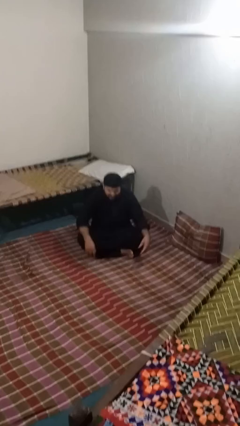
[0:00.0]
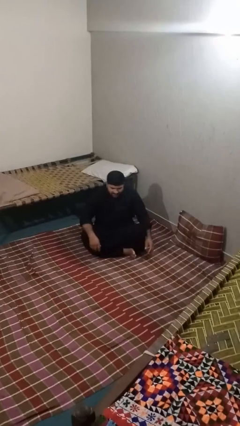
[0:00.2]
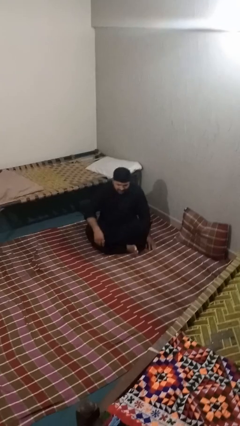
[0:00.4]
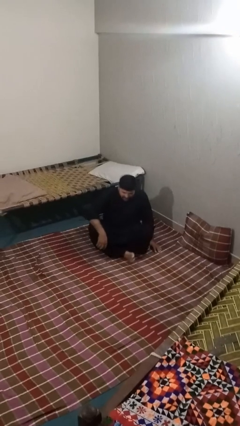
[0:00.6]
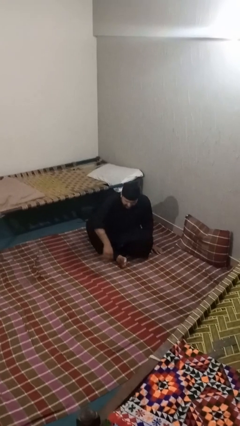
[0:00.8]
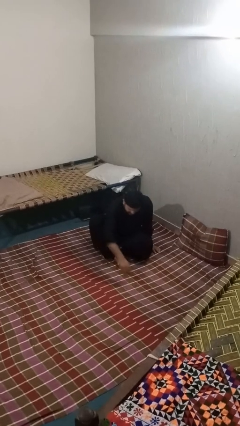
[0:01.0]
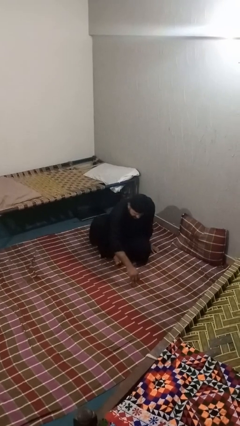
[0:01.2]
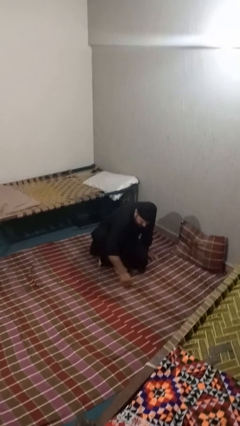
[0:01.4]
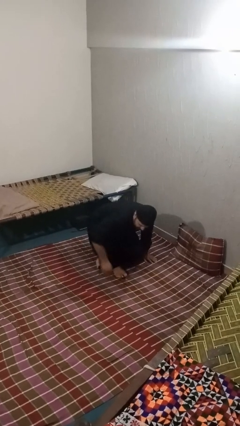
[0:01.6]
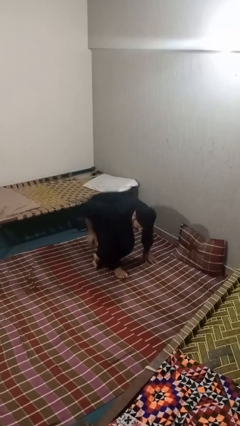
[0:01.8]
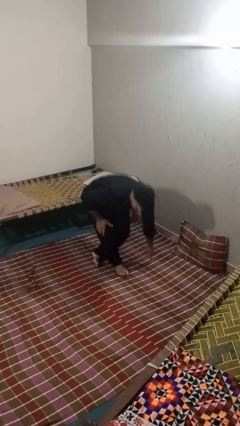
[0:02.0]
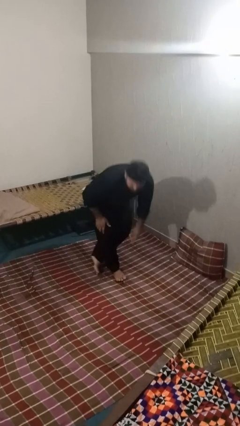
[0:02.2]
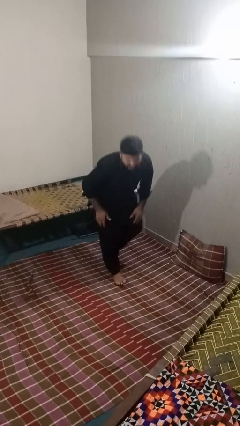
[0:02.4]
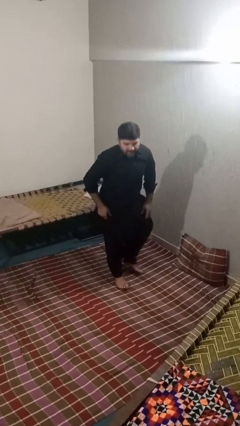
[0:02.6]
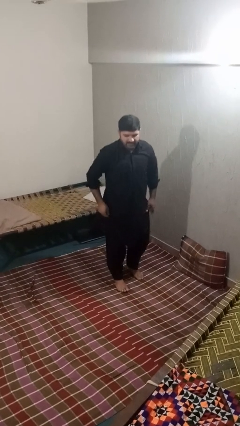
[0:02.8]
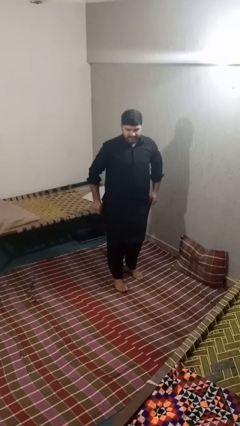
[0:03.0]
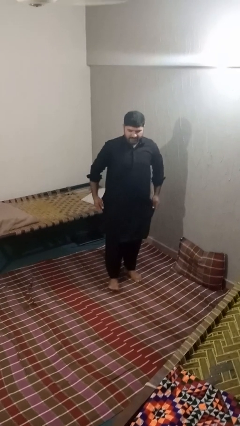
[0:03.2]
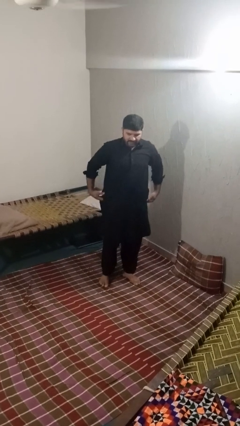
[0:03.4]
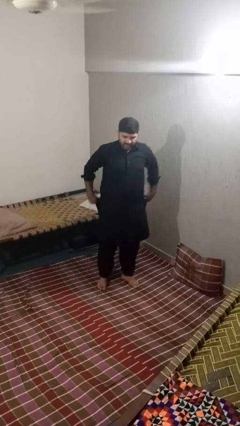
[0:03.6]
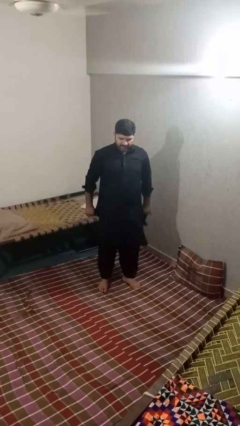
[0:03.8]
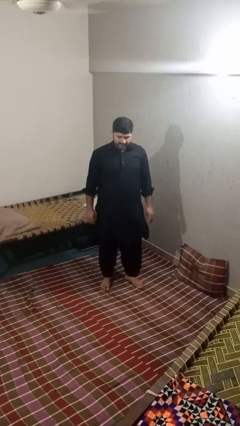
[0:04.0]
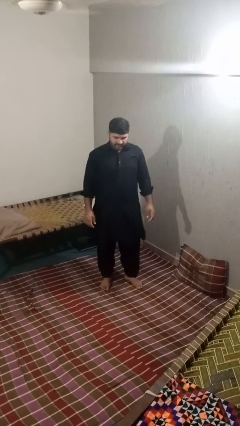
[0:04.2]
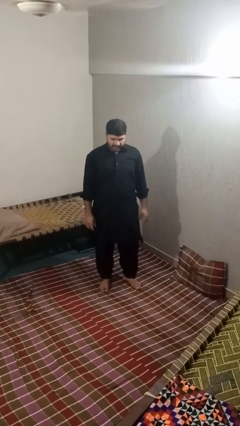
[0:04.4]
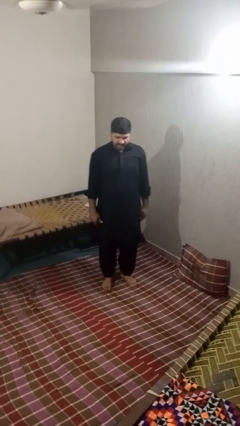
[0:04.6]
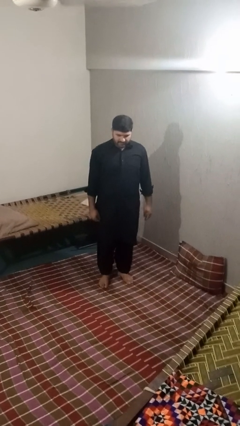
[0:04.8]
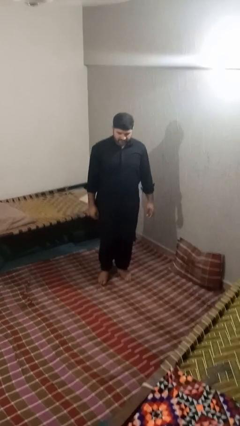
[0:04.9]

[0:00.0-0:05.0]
person stands up from floor

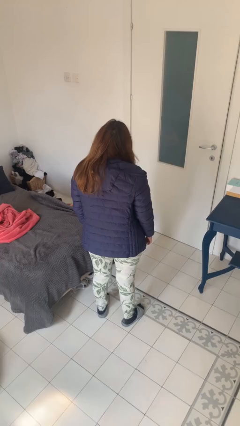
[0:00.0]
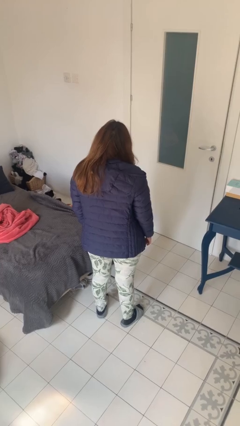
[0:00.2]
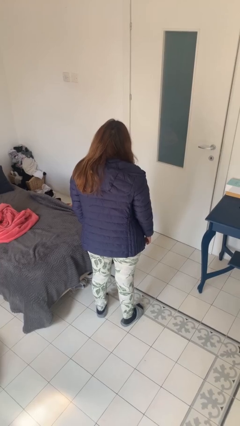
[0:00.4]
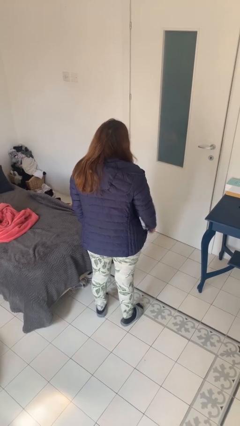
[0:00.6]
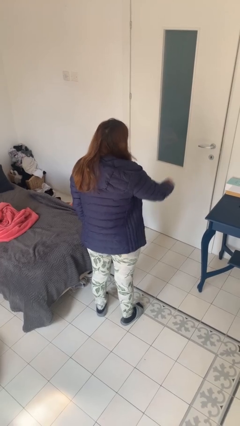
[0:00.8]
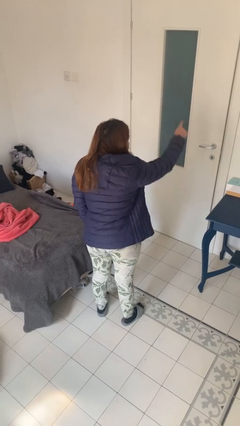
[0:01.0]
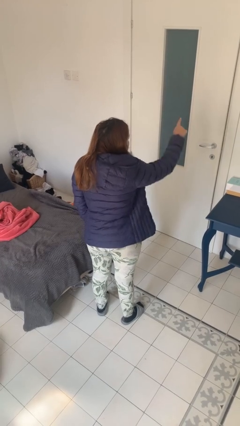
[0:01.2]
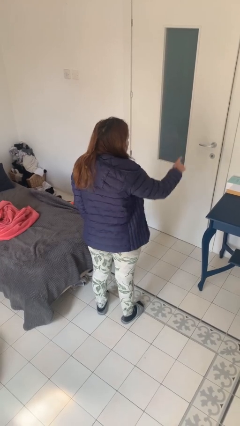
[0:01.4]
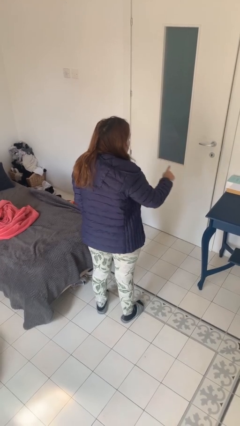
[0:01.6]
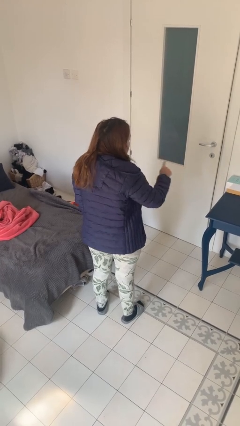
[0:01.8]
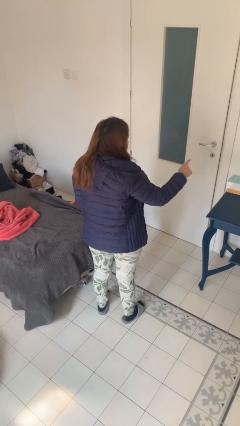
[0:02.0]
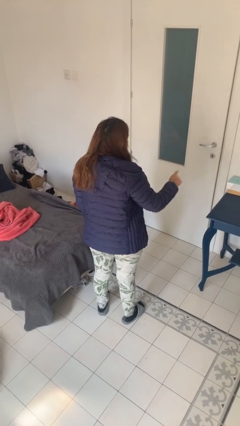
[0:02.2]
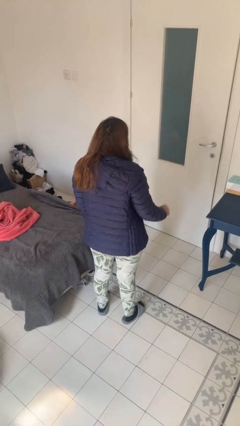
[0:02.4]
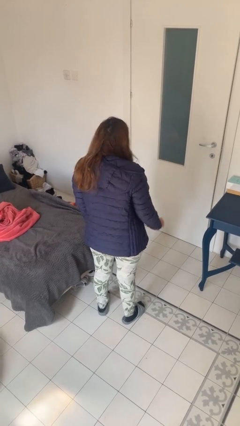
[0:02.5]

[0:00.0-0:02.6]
person gestures number one

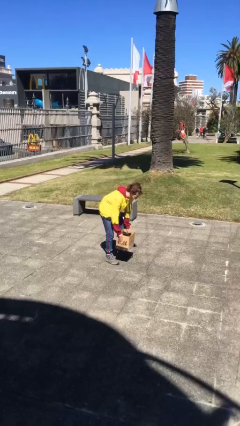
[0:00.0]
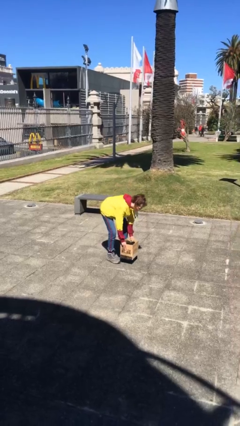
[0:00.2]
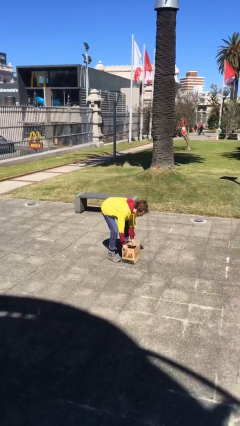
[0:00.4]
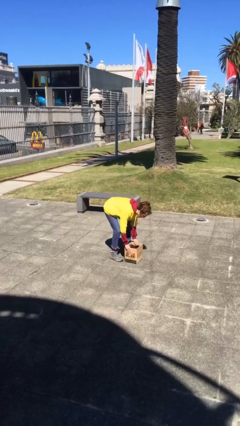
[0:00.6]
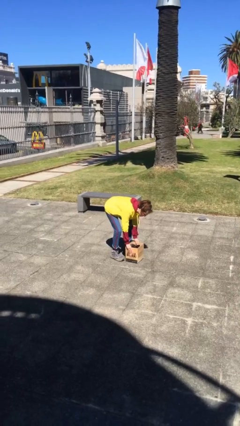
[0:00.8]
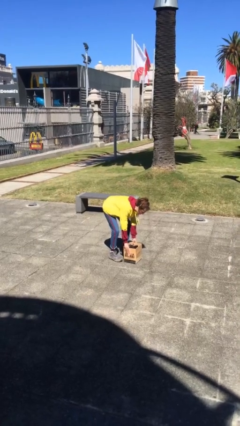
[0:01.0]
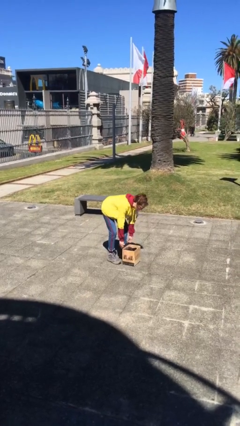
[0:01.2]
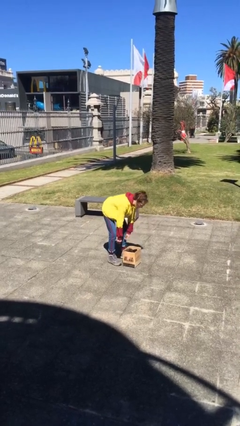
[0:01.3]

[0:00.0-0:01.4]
person puts down object on floor

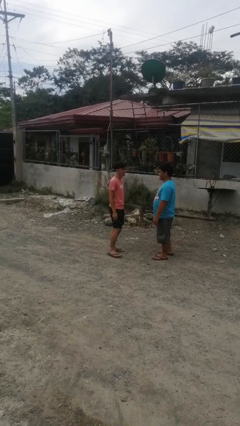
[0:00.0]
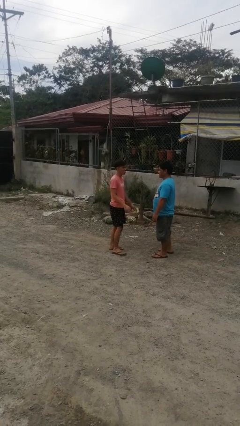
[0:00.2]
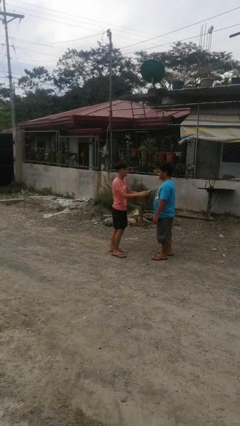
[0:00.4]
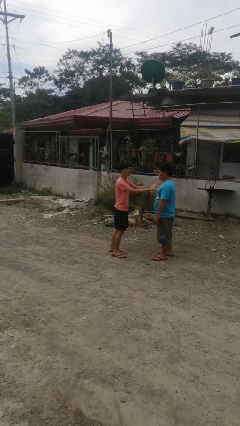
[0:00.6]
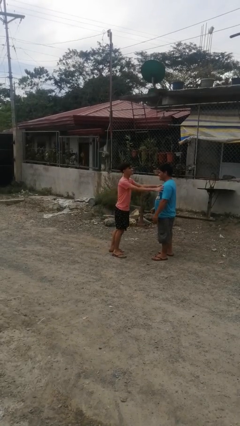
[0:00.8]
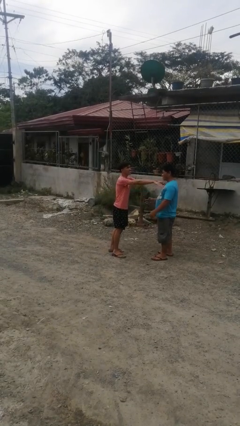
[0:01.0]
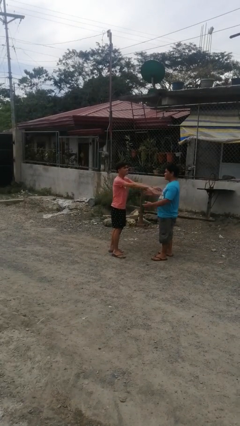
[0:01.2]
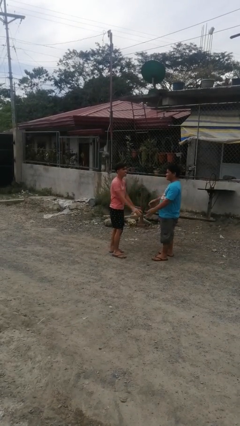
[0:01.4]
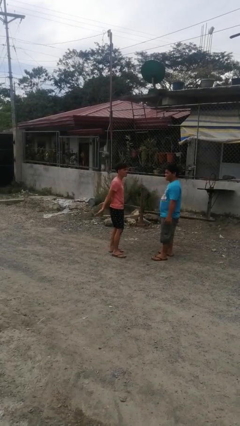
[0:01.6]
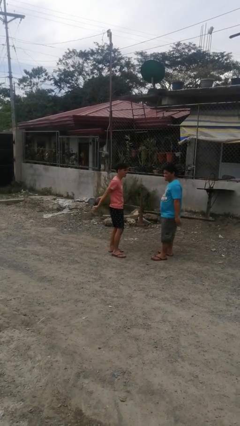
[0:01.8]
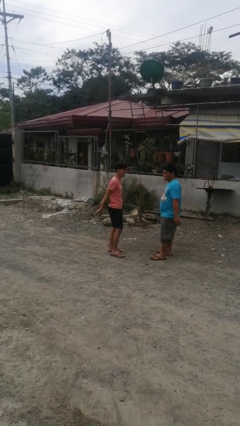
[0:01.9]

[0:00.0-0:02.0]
person shoves person

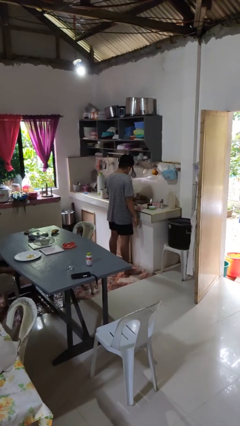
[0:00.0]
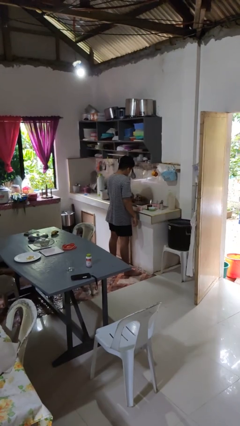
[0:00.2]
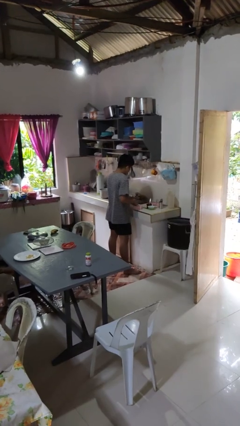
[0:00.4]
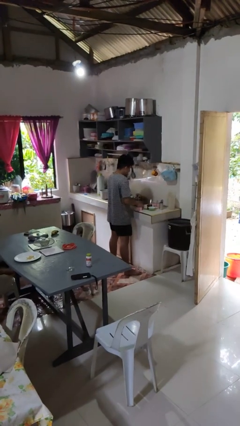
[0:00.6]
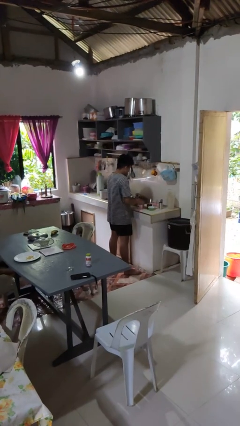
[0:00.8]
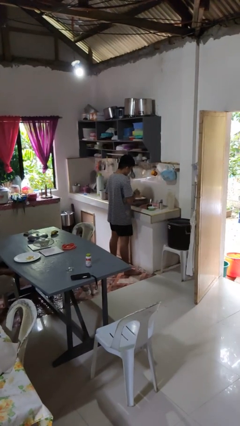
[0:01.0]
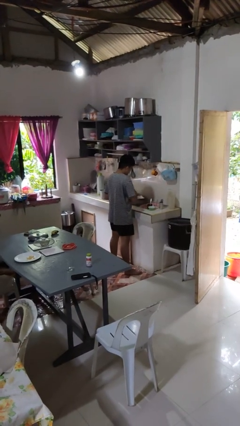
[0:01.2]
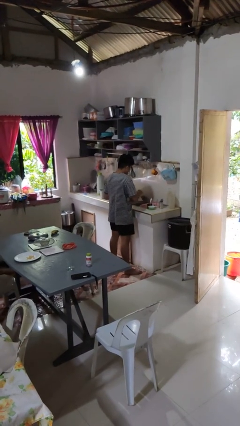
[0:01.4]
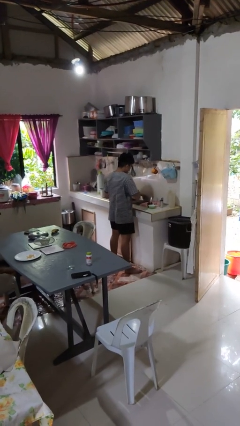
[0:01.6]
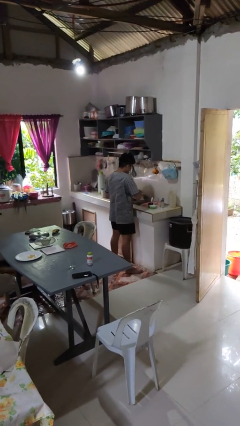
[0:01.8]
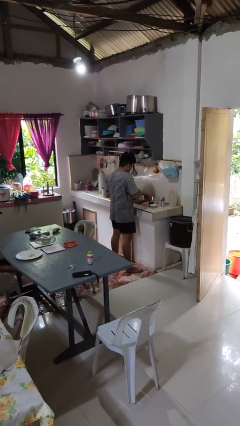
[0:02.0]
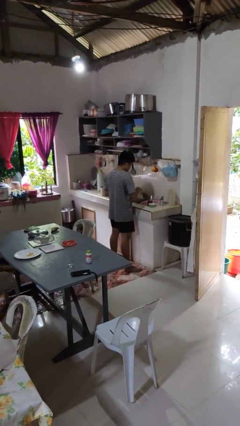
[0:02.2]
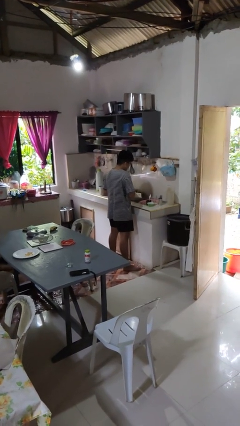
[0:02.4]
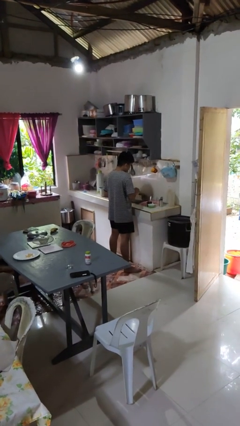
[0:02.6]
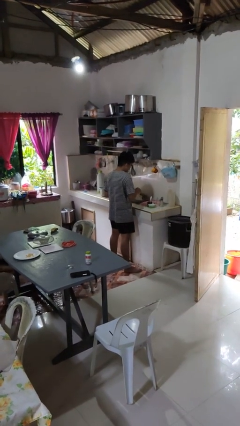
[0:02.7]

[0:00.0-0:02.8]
person washes dish

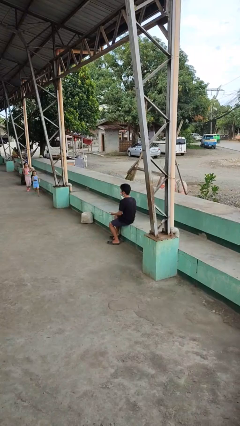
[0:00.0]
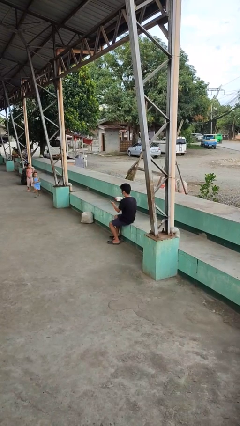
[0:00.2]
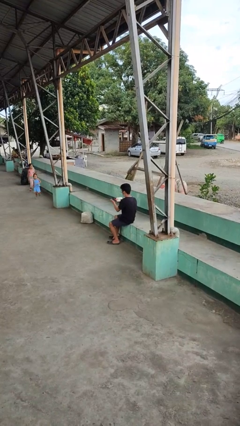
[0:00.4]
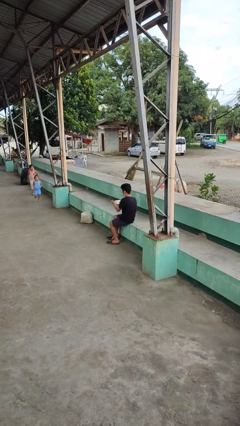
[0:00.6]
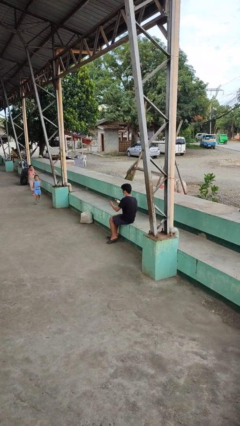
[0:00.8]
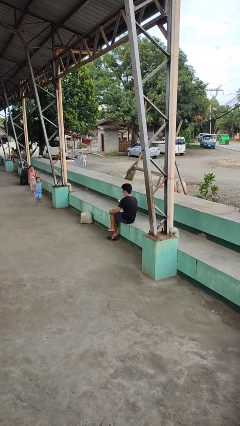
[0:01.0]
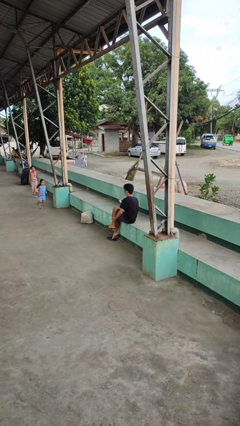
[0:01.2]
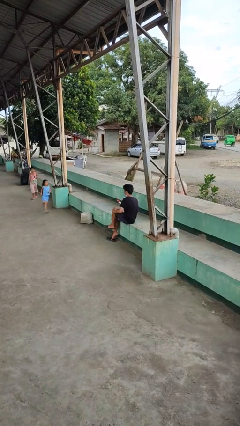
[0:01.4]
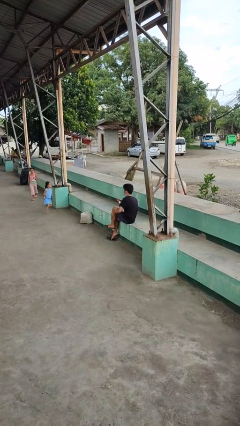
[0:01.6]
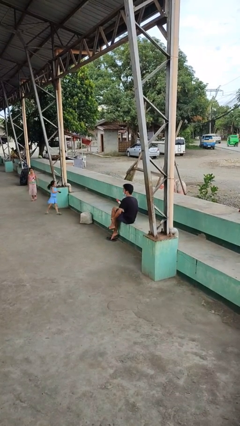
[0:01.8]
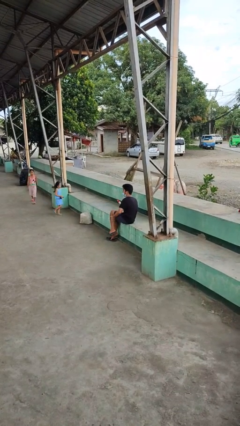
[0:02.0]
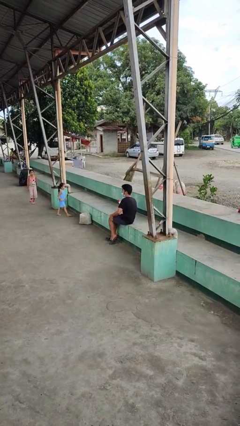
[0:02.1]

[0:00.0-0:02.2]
person applies sunscreen

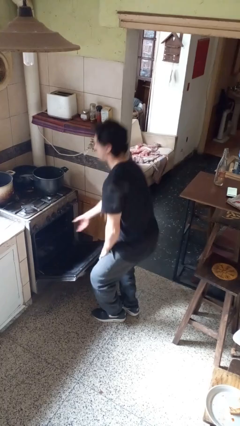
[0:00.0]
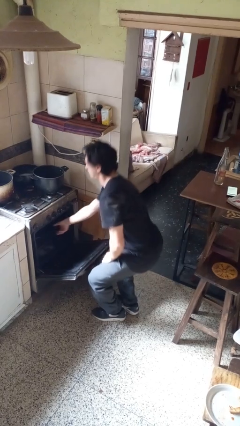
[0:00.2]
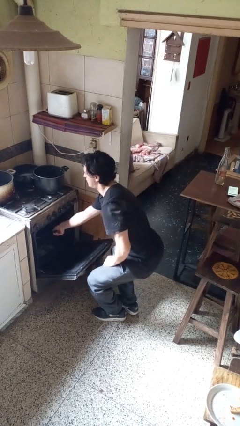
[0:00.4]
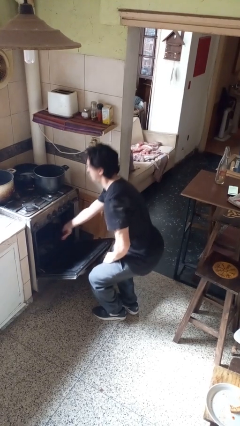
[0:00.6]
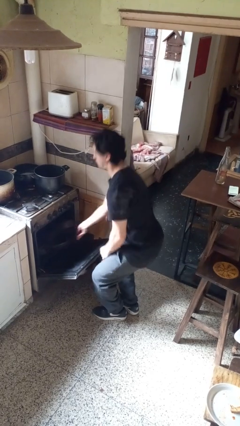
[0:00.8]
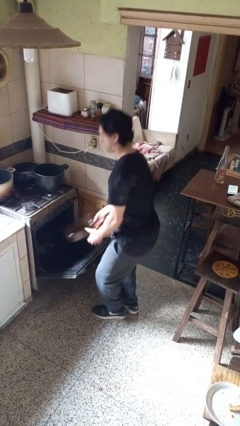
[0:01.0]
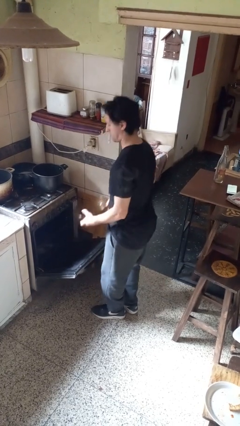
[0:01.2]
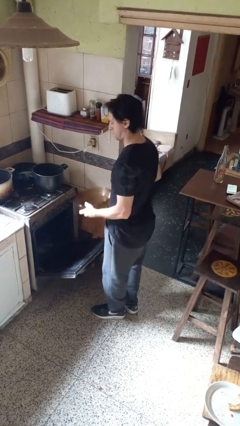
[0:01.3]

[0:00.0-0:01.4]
person takes object from oven
